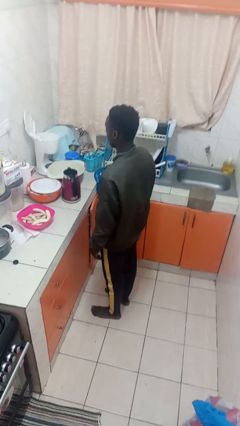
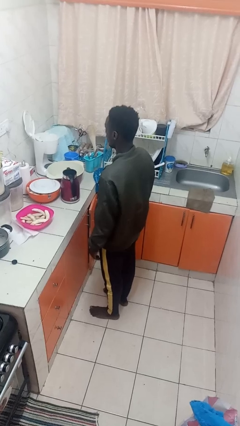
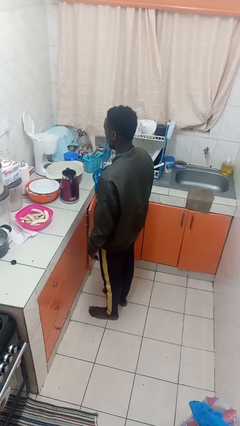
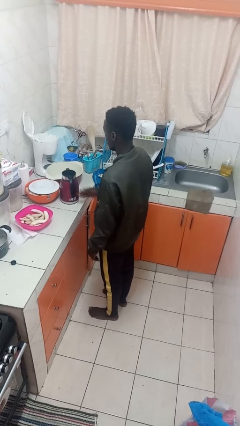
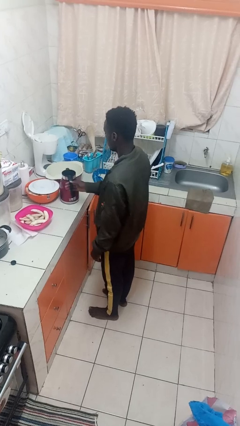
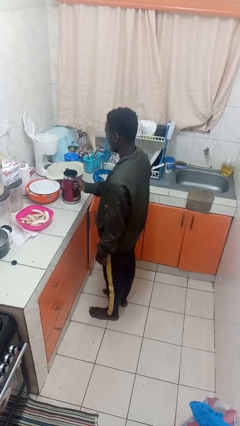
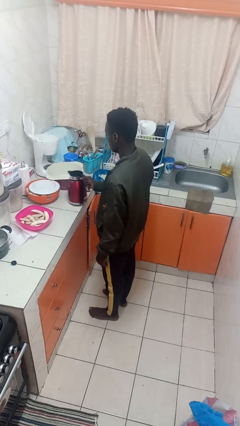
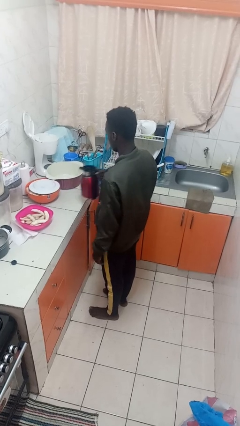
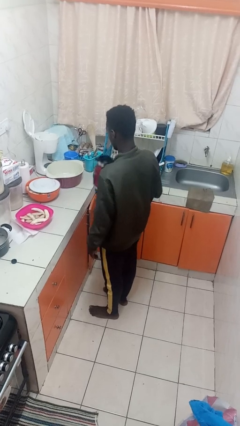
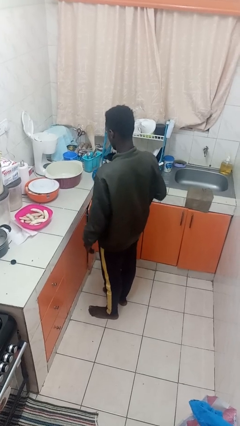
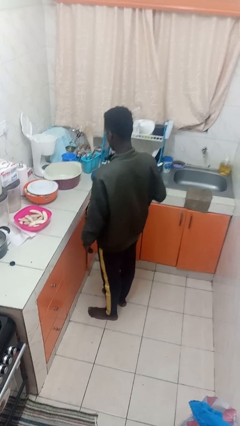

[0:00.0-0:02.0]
person picks up object from countertop

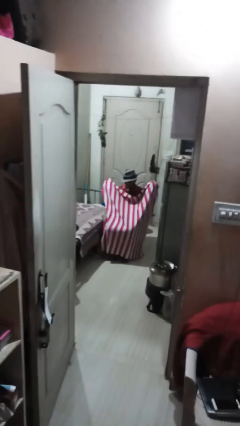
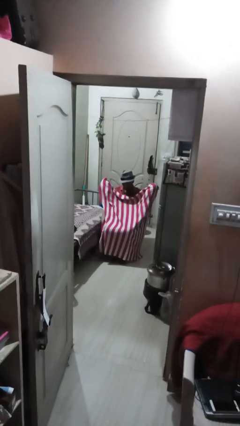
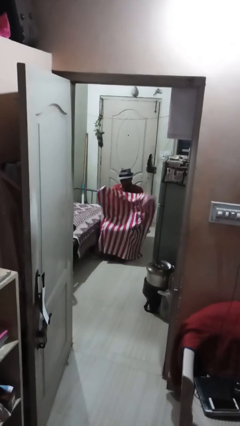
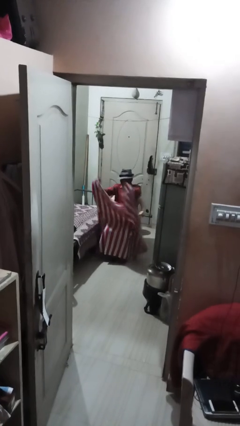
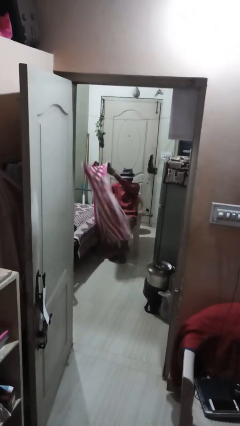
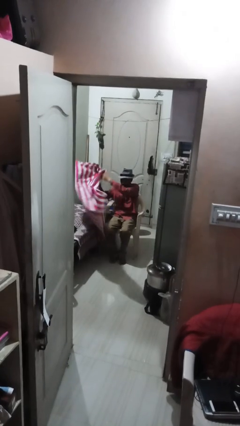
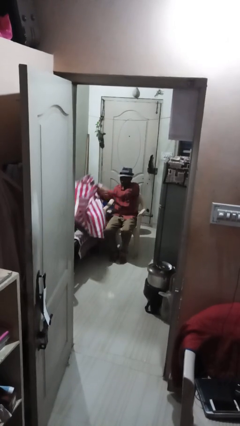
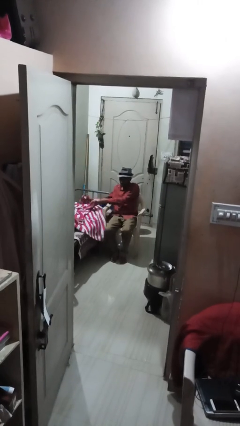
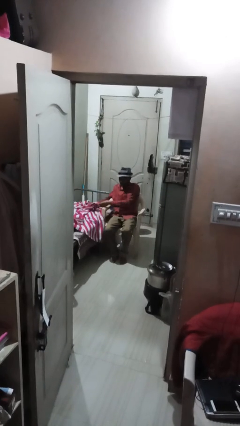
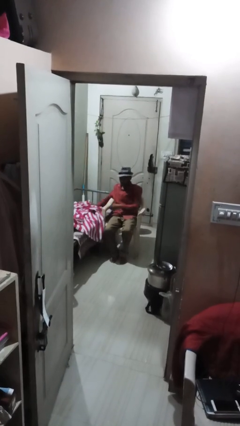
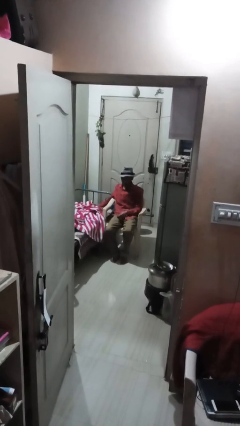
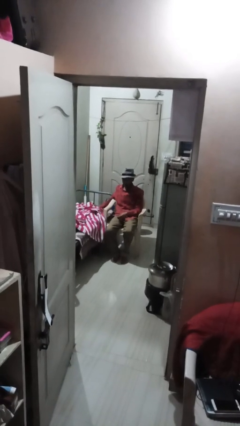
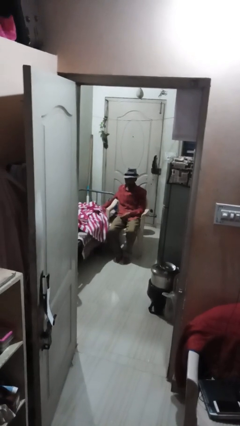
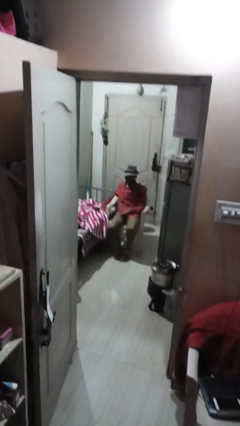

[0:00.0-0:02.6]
person uncovers with blanket

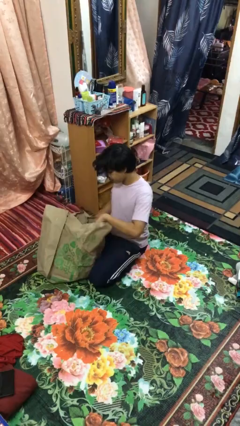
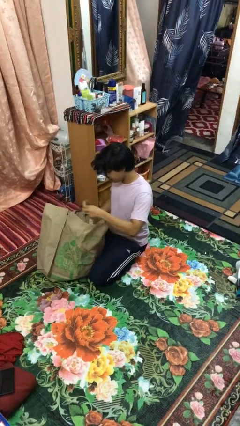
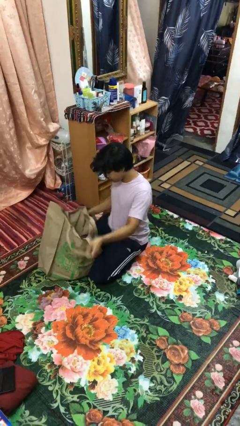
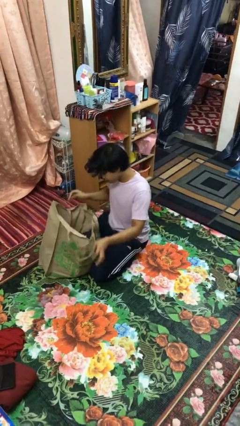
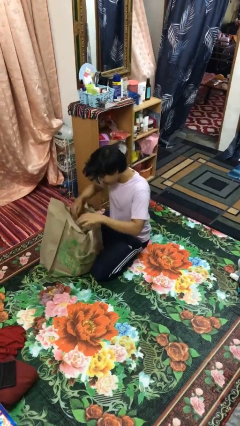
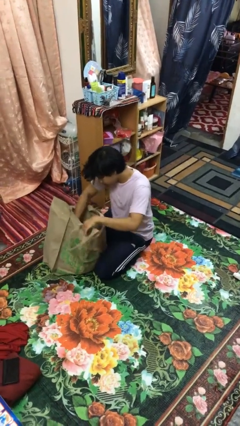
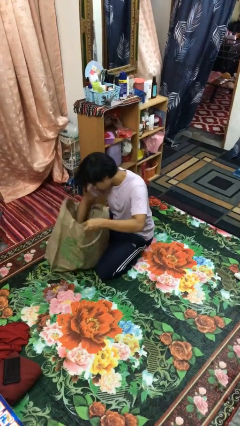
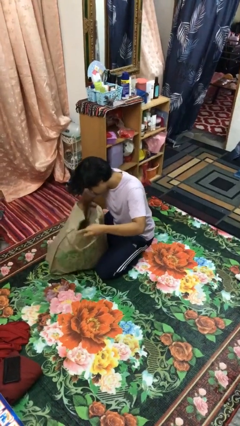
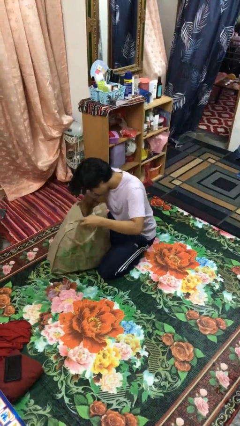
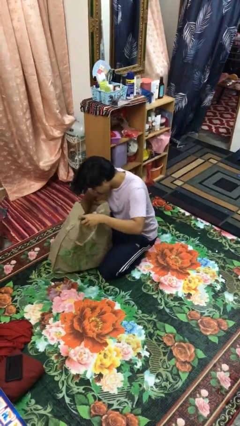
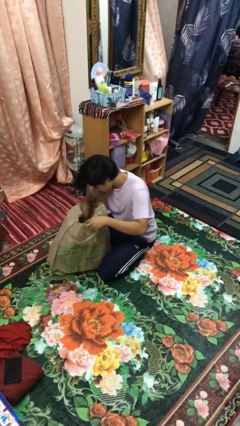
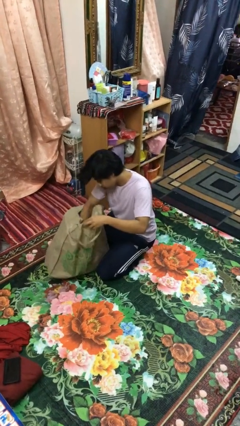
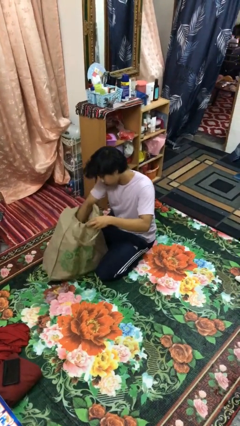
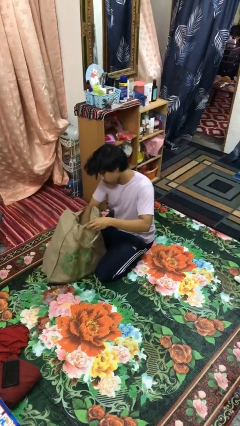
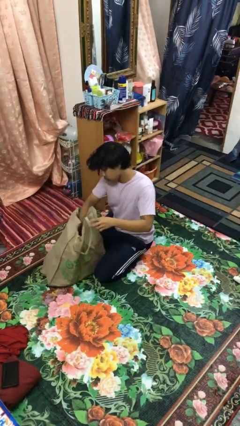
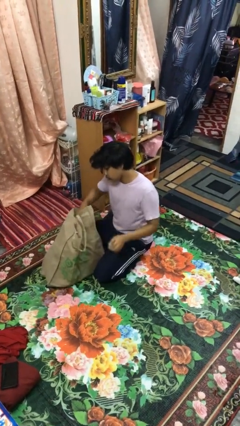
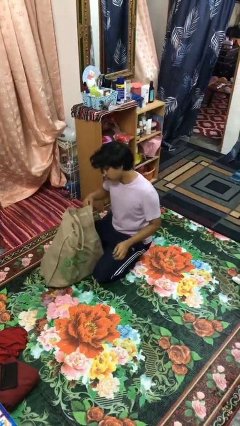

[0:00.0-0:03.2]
person searches in bag

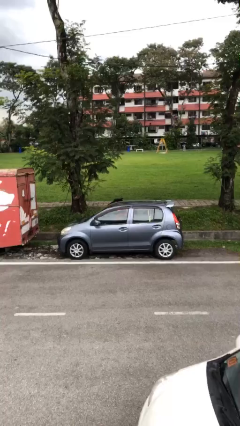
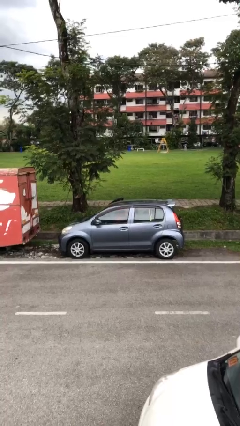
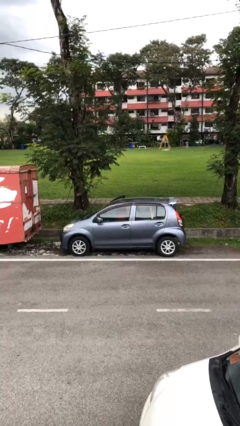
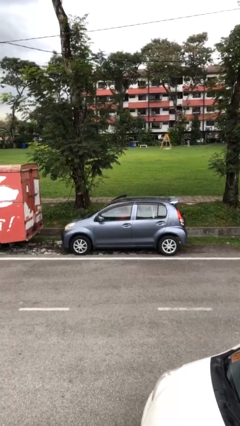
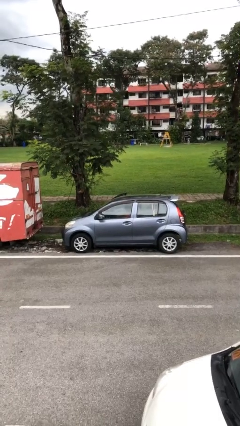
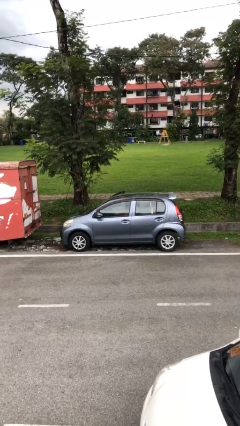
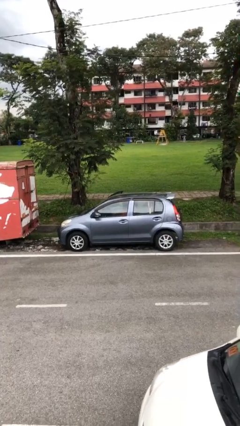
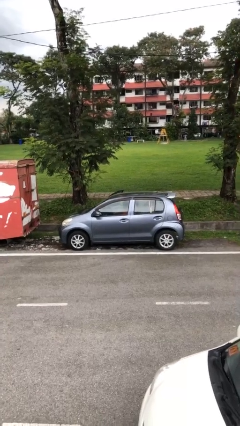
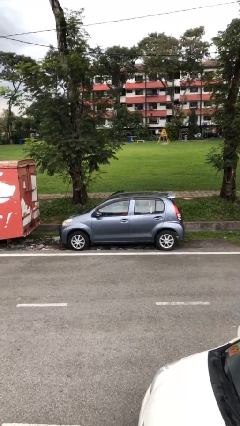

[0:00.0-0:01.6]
person enters car

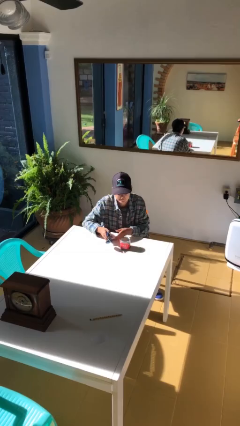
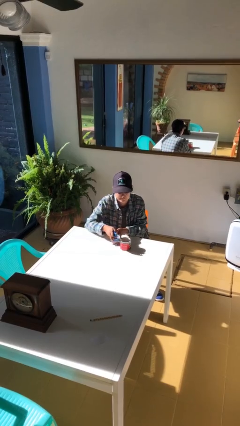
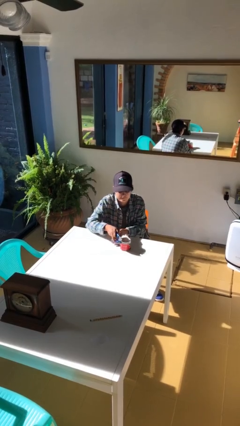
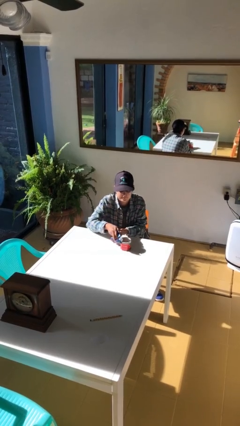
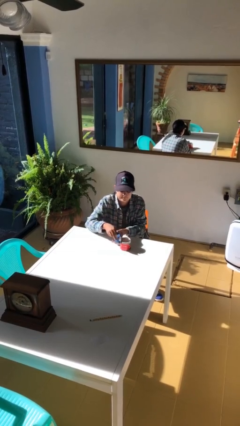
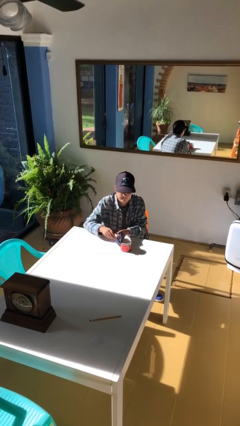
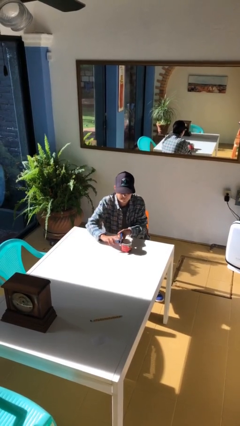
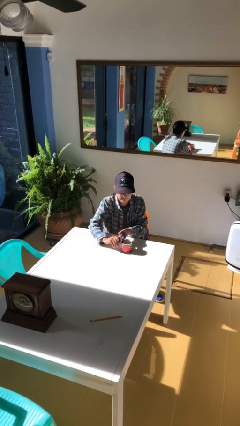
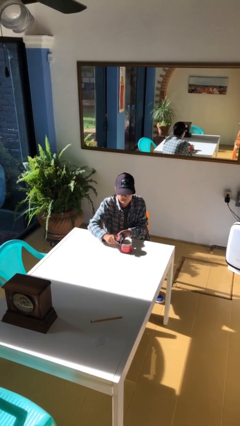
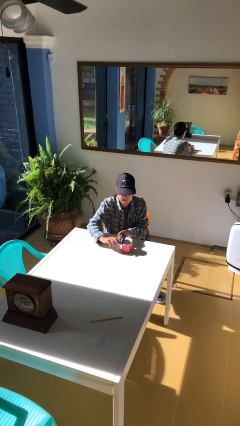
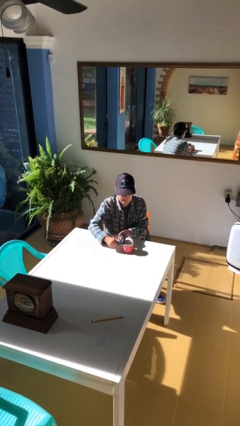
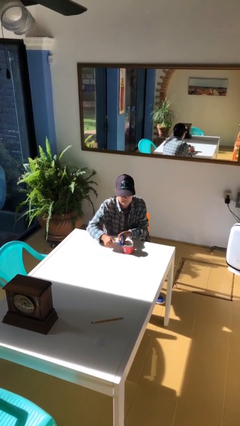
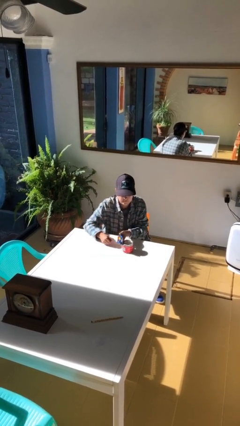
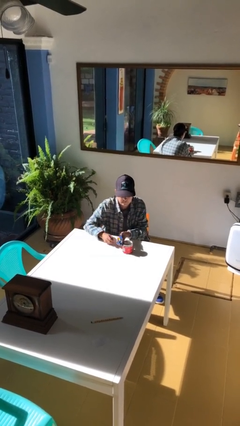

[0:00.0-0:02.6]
person opens can with can opener

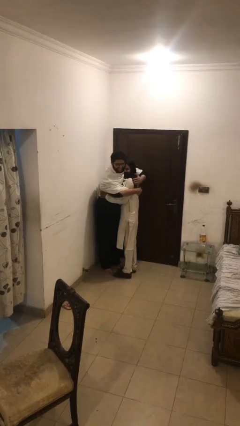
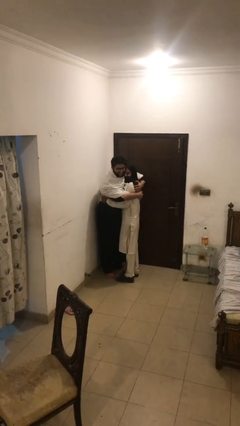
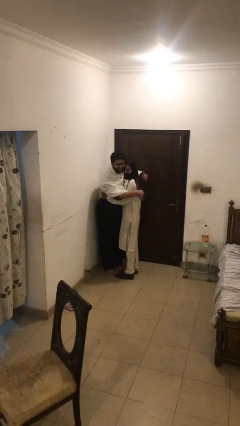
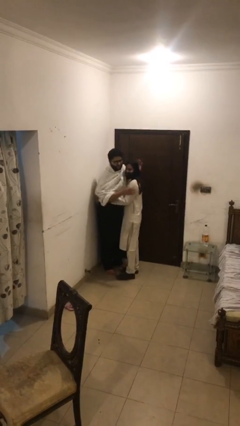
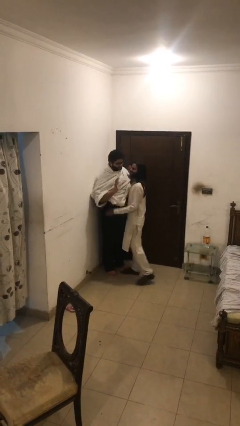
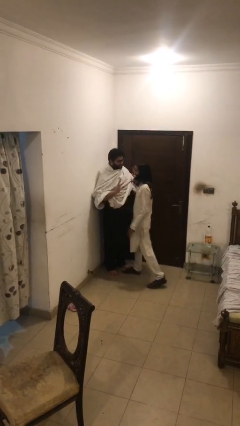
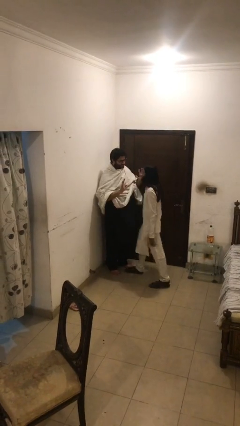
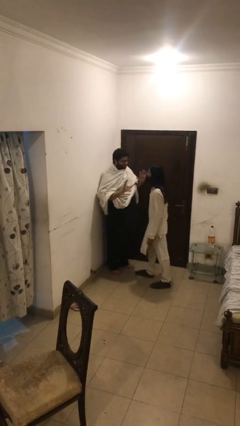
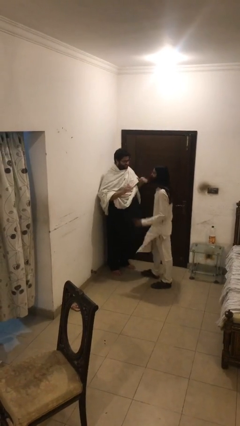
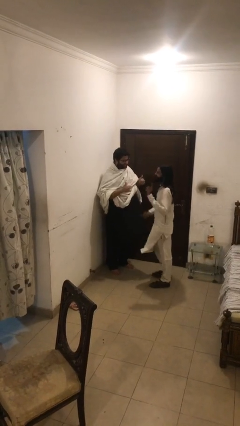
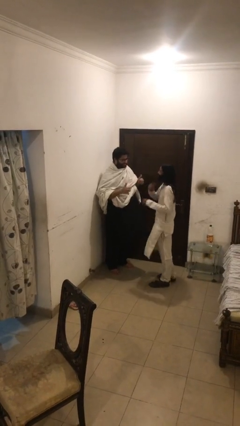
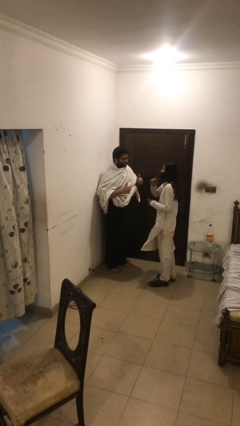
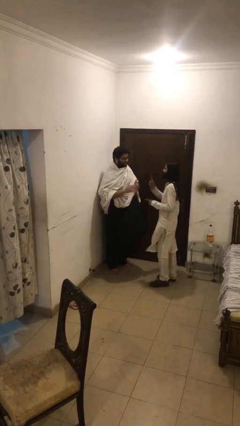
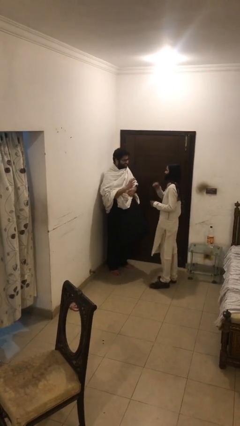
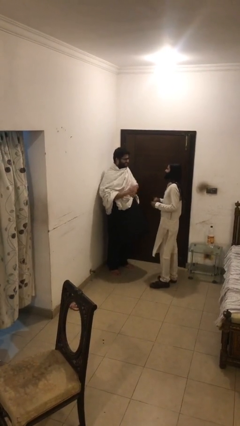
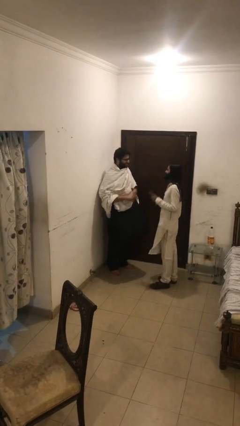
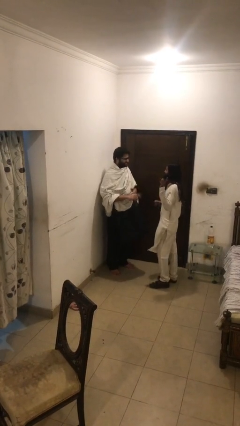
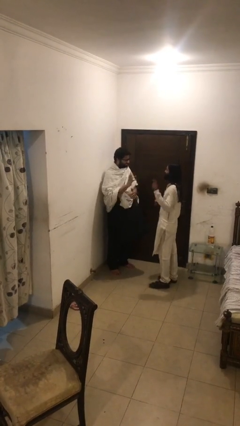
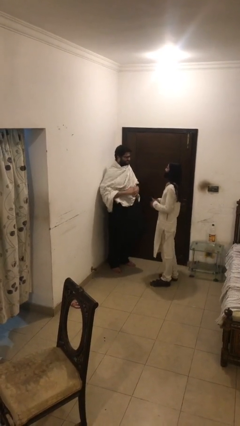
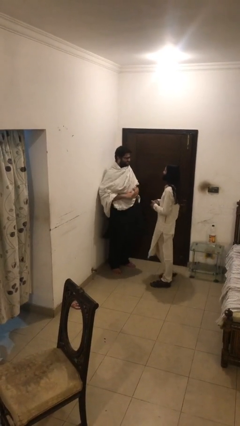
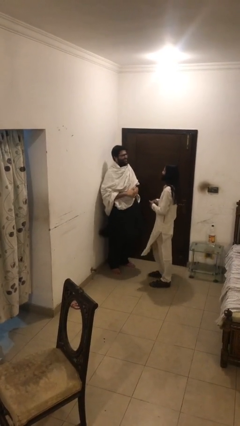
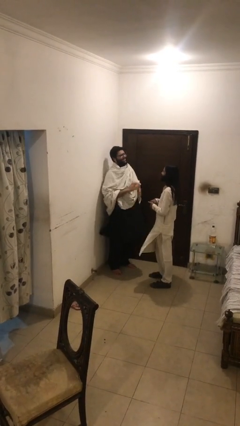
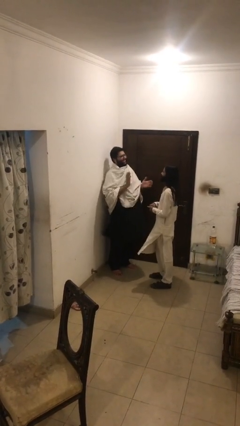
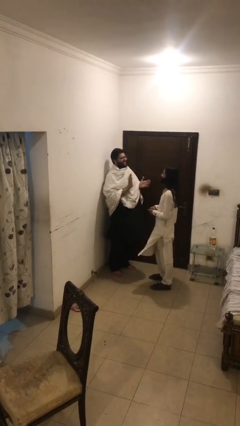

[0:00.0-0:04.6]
person talks to person

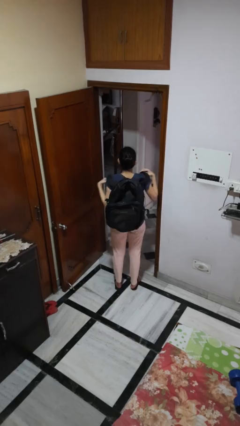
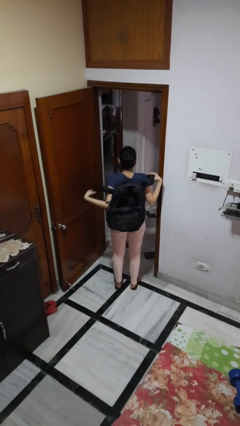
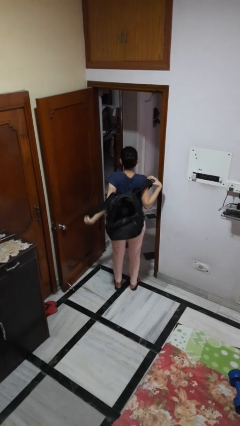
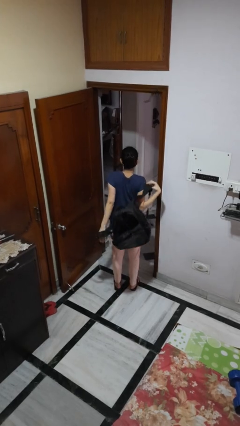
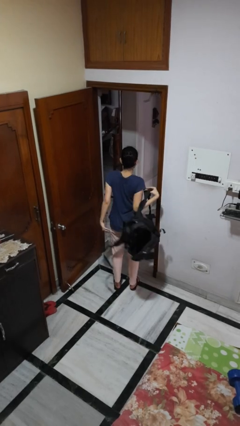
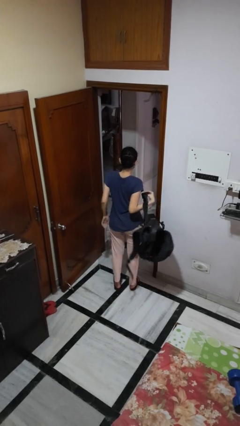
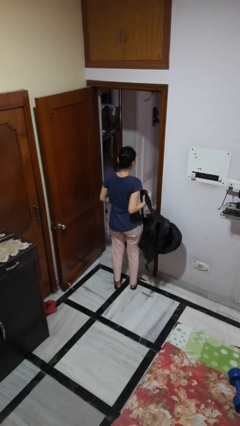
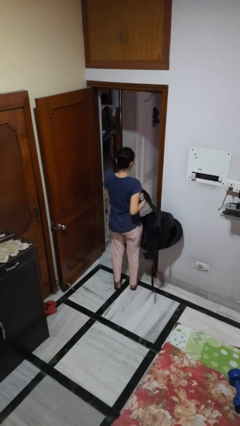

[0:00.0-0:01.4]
person takes off backpack
